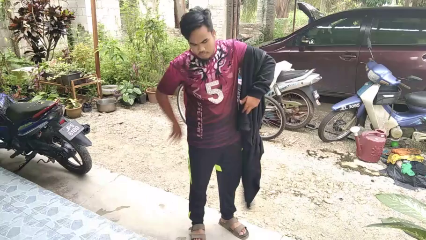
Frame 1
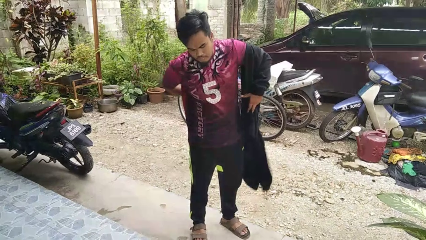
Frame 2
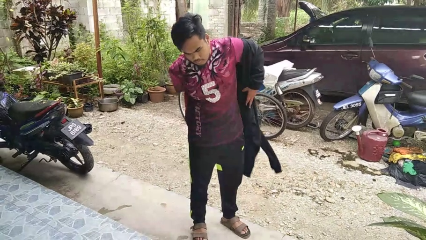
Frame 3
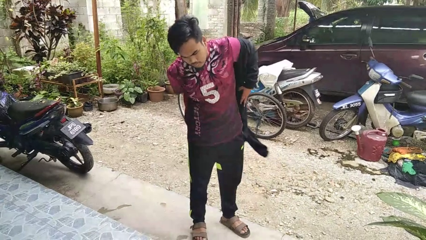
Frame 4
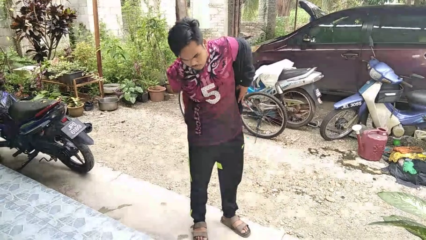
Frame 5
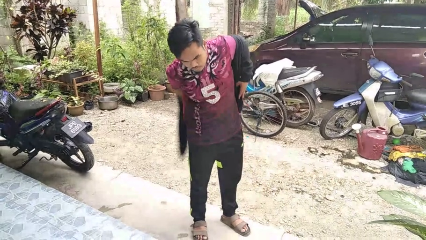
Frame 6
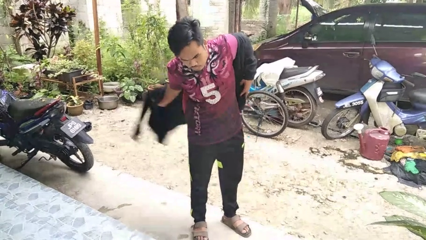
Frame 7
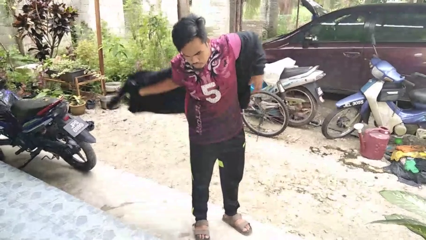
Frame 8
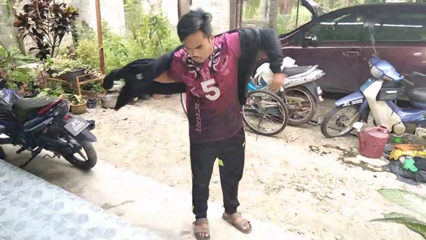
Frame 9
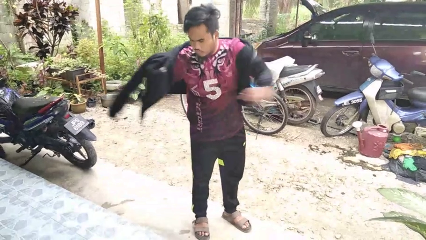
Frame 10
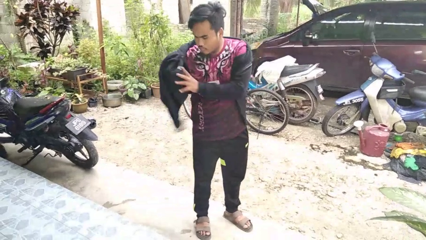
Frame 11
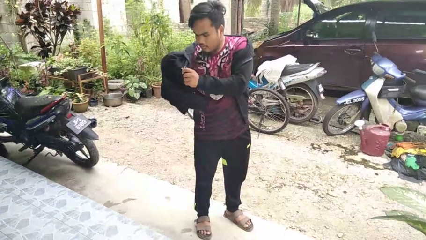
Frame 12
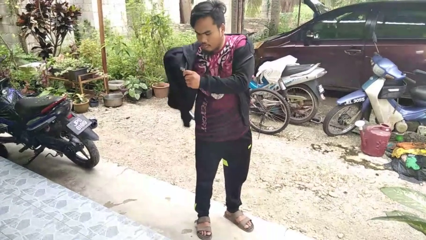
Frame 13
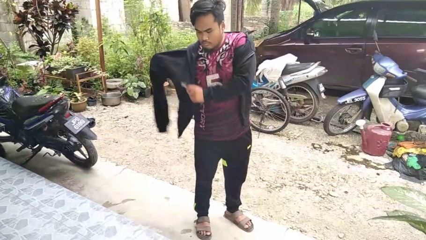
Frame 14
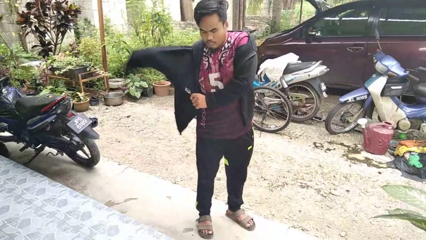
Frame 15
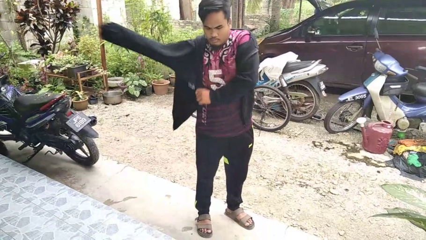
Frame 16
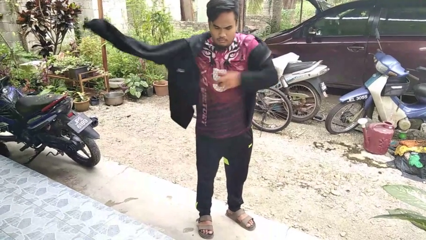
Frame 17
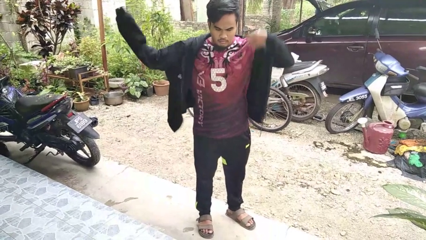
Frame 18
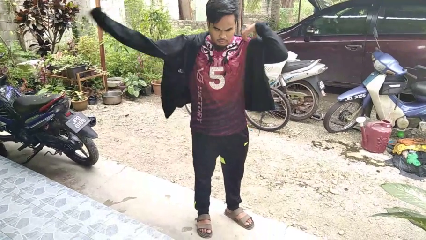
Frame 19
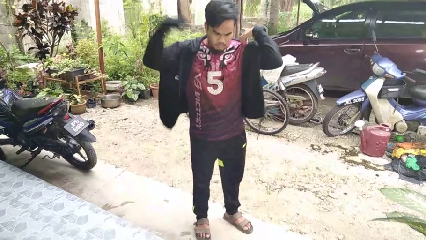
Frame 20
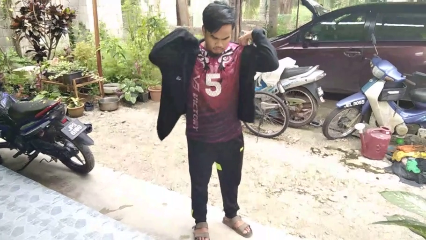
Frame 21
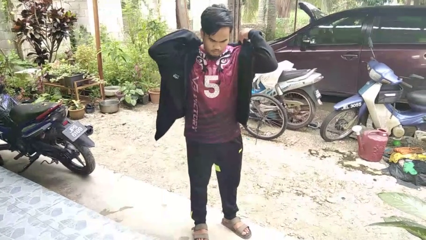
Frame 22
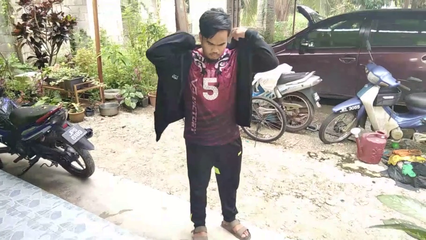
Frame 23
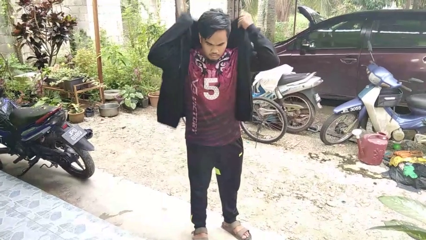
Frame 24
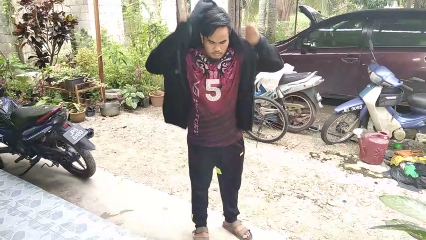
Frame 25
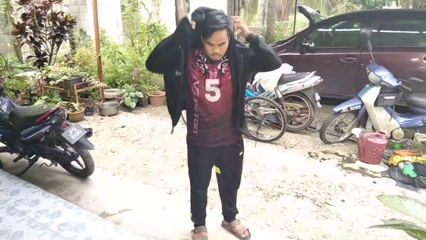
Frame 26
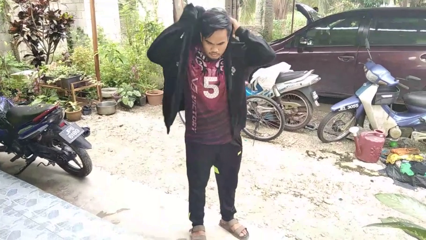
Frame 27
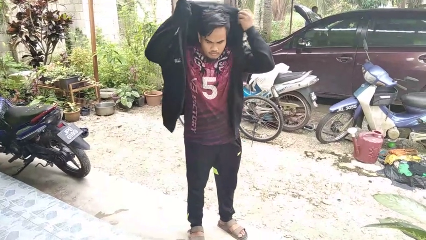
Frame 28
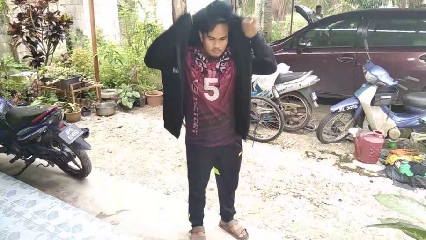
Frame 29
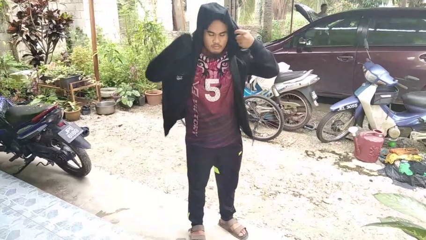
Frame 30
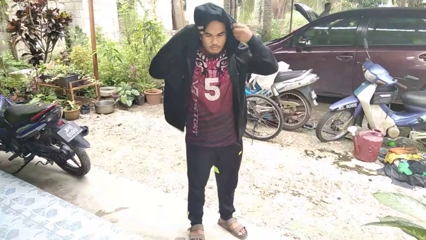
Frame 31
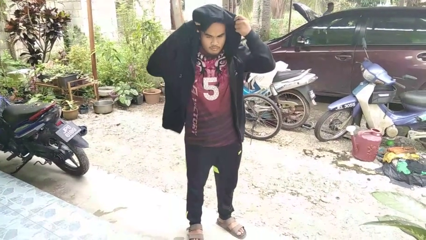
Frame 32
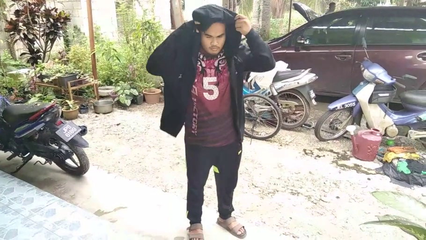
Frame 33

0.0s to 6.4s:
person puts on hoodie

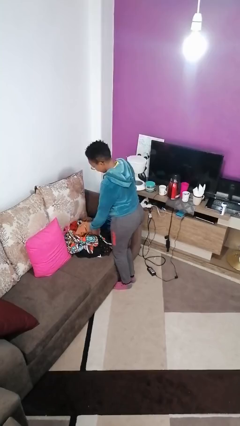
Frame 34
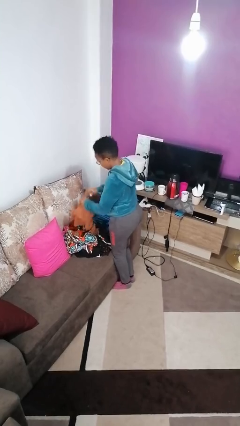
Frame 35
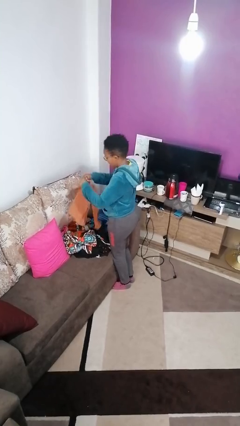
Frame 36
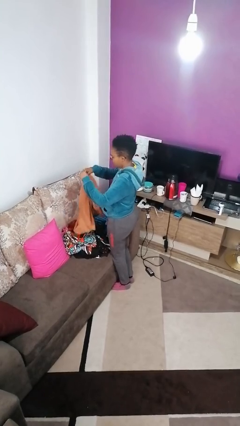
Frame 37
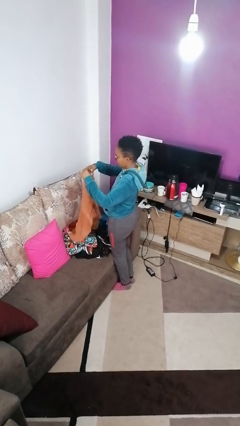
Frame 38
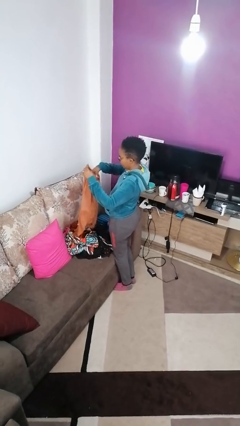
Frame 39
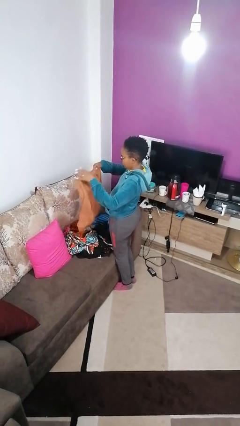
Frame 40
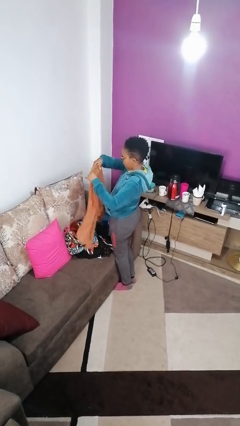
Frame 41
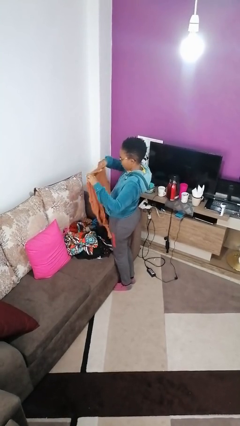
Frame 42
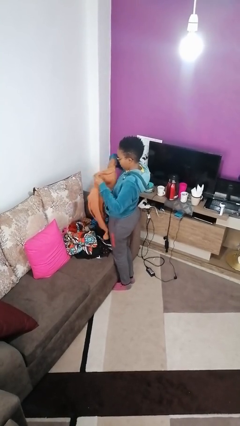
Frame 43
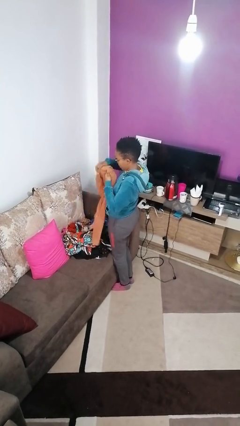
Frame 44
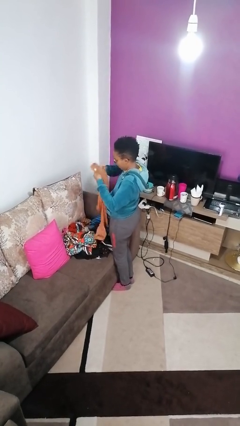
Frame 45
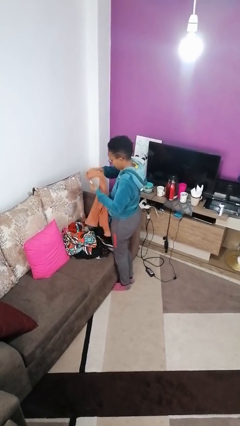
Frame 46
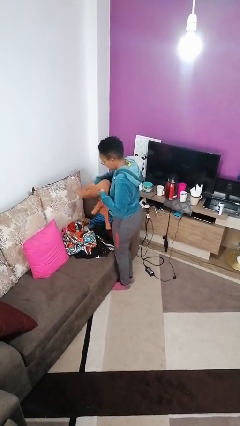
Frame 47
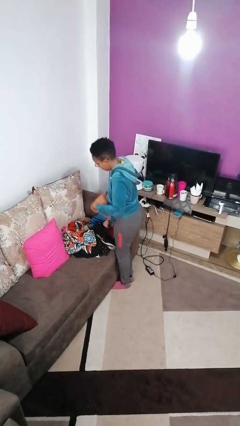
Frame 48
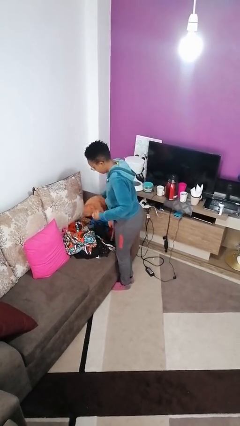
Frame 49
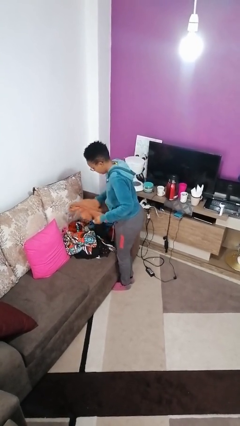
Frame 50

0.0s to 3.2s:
person folds shirt

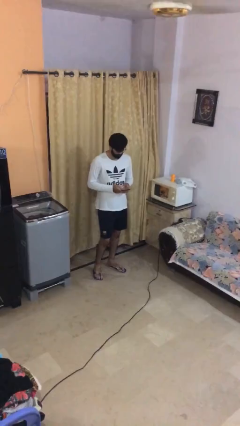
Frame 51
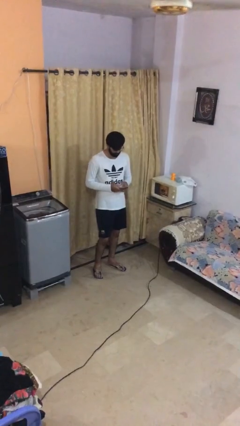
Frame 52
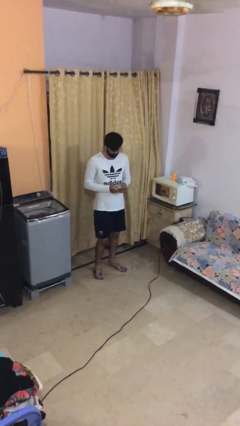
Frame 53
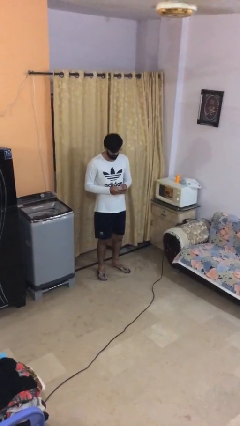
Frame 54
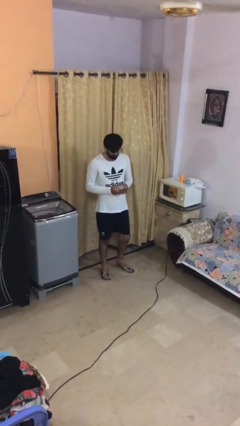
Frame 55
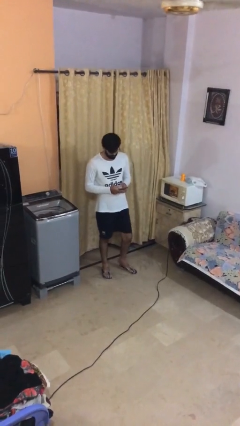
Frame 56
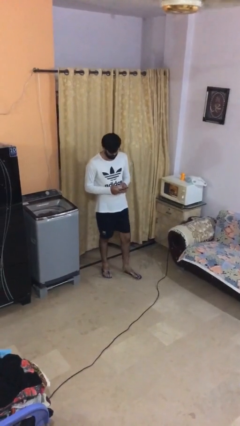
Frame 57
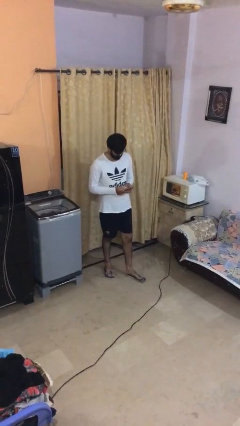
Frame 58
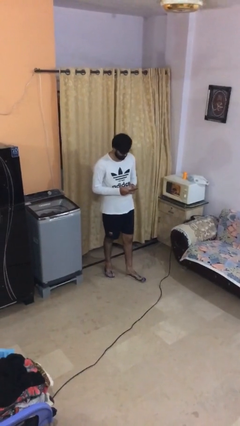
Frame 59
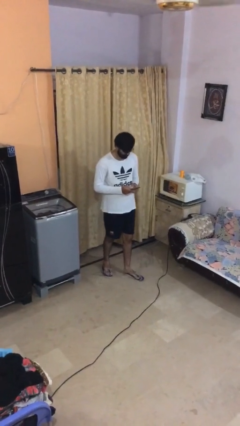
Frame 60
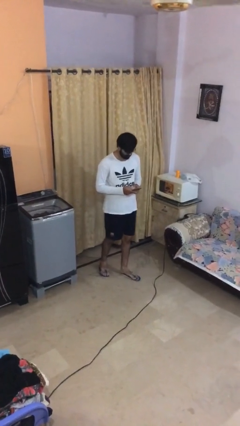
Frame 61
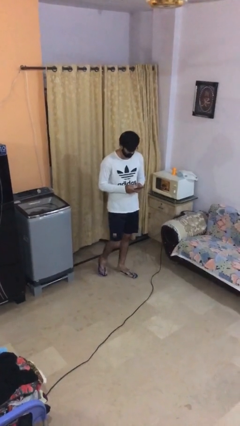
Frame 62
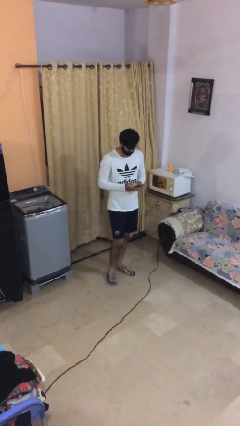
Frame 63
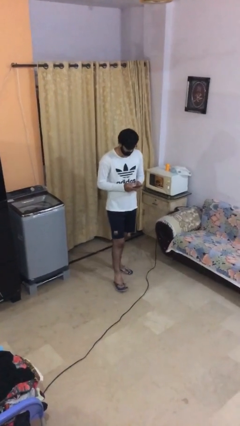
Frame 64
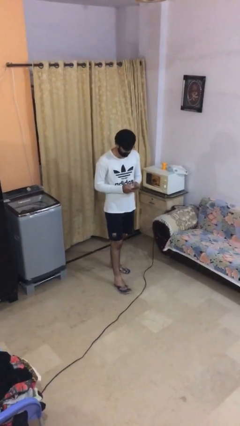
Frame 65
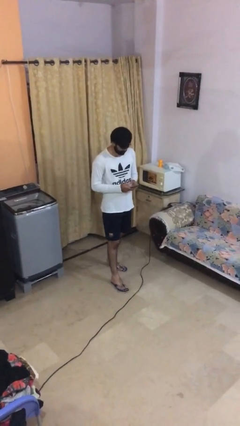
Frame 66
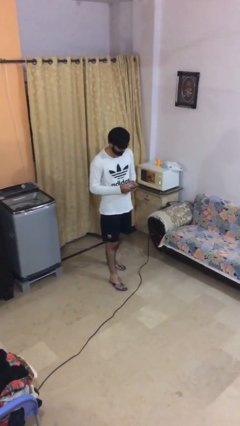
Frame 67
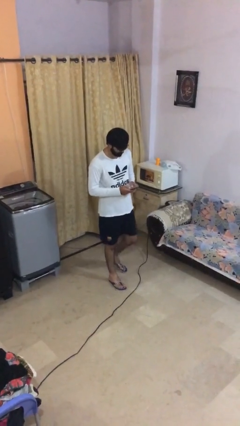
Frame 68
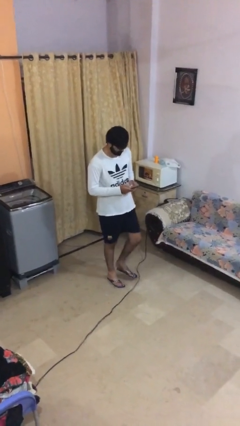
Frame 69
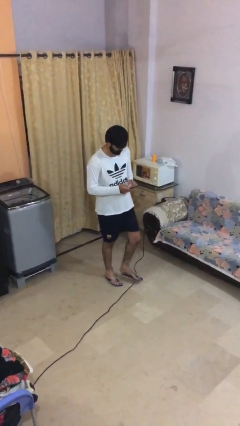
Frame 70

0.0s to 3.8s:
person texts on phone

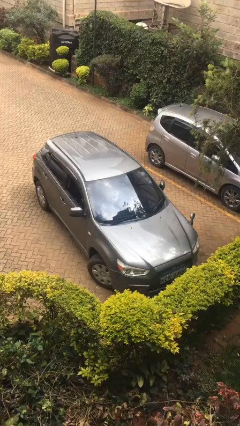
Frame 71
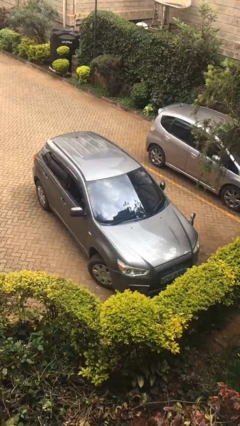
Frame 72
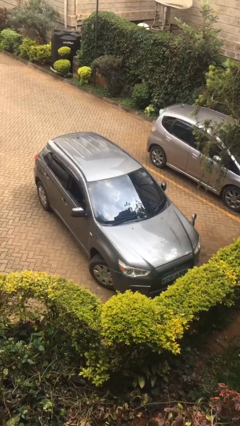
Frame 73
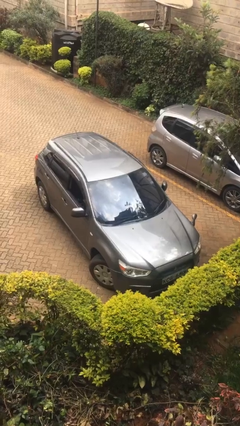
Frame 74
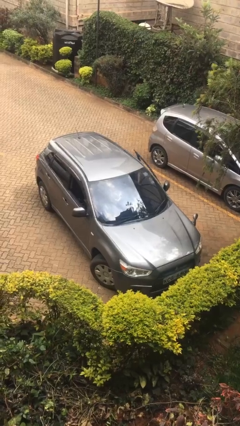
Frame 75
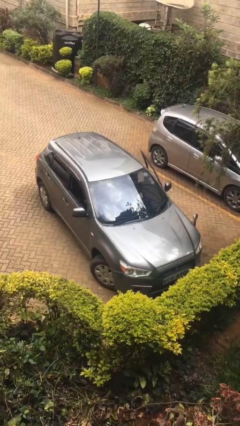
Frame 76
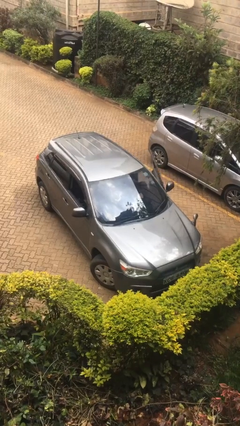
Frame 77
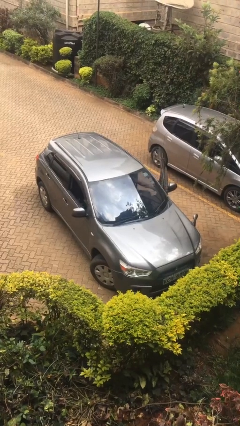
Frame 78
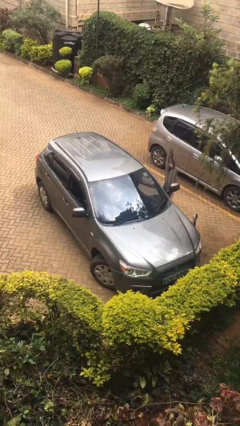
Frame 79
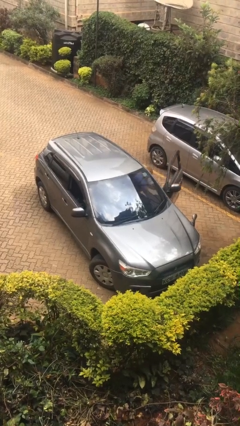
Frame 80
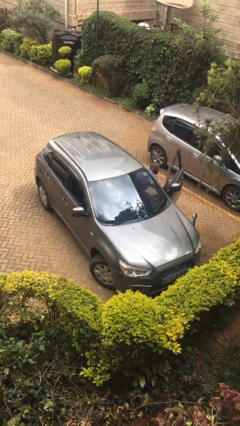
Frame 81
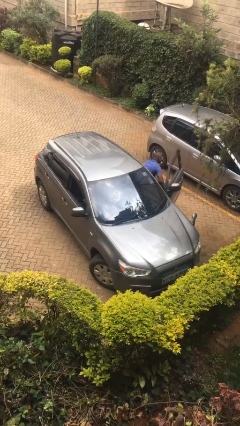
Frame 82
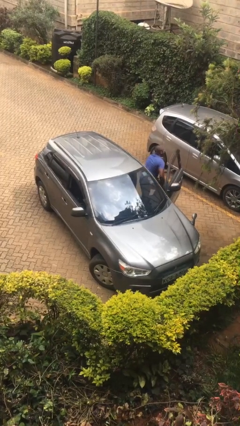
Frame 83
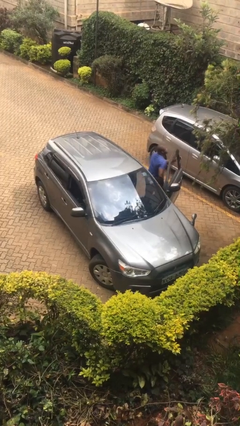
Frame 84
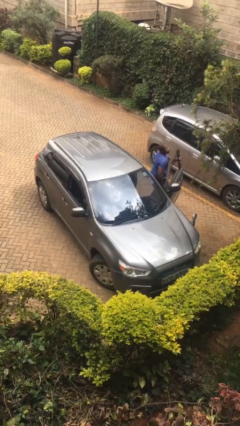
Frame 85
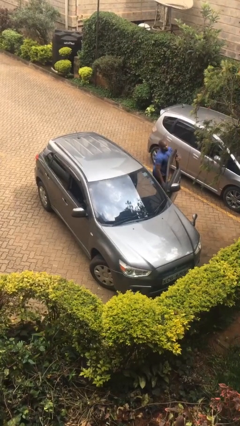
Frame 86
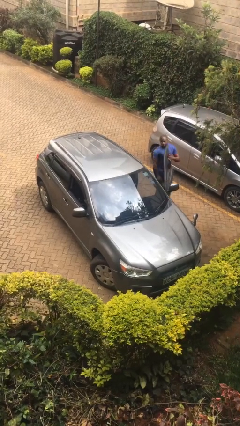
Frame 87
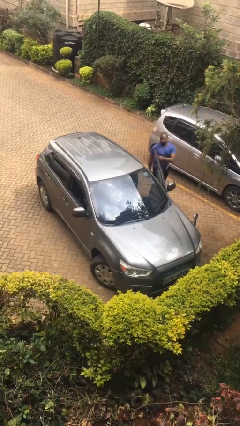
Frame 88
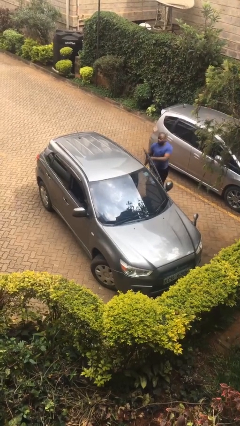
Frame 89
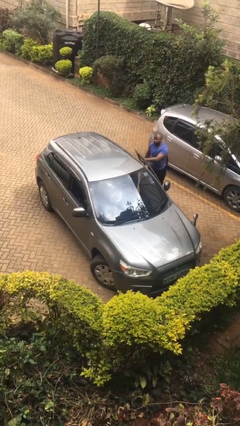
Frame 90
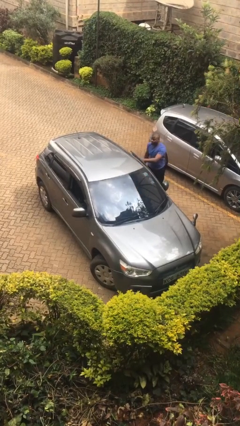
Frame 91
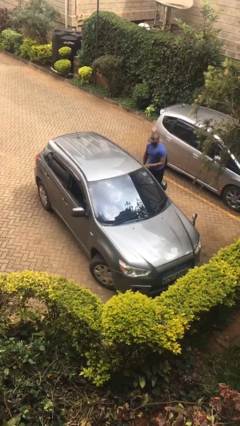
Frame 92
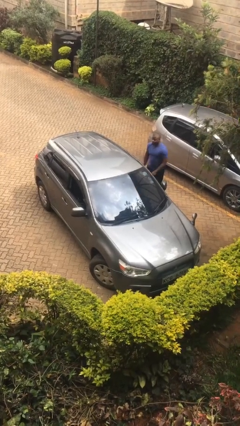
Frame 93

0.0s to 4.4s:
car drops off person
